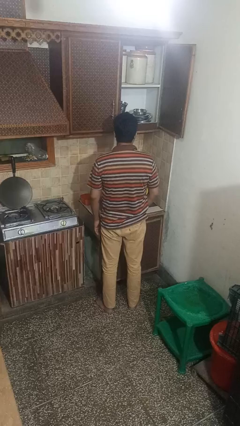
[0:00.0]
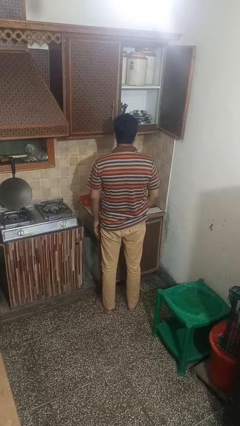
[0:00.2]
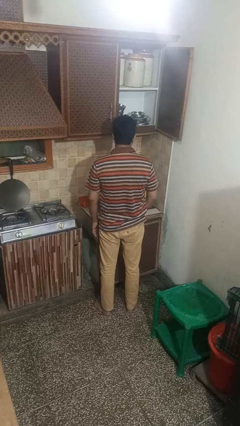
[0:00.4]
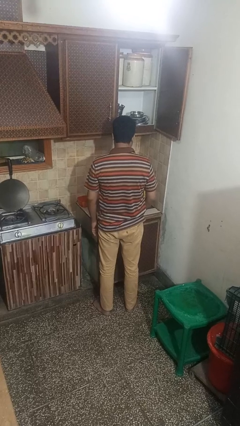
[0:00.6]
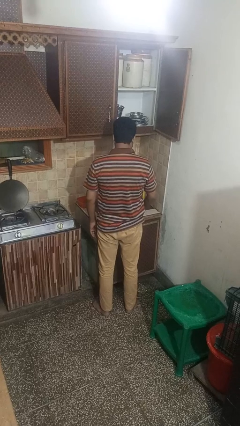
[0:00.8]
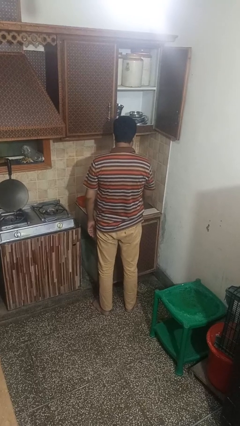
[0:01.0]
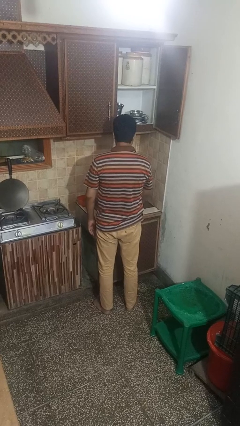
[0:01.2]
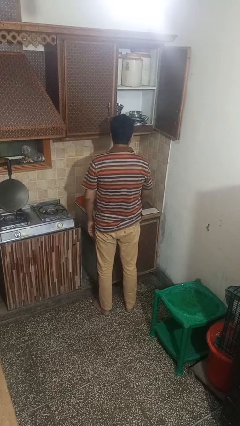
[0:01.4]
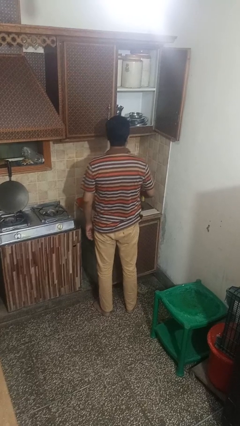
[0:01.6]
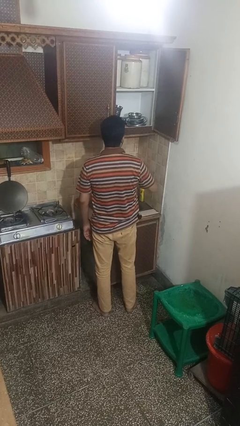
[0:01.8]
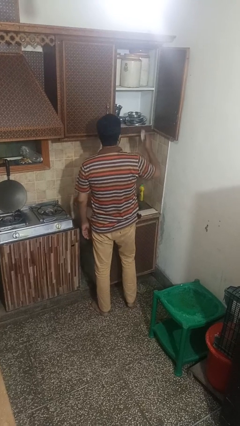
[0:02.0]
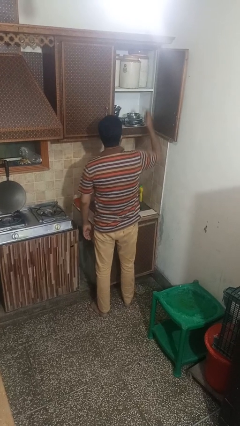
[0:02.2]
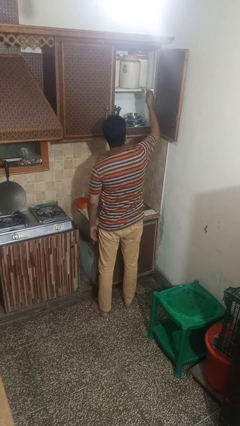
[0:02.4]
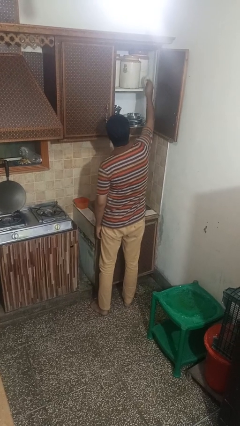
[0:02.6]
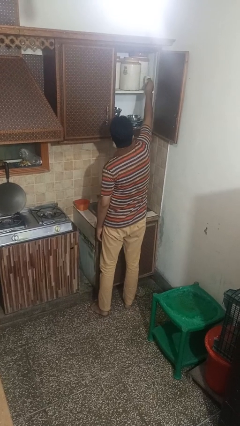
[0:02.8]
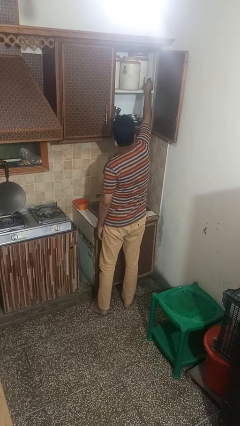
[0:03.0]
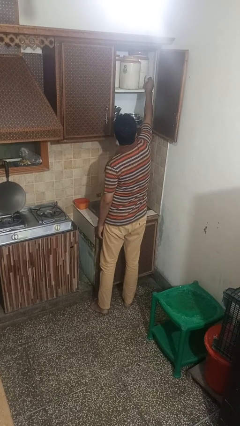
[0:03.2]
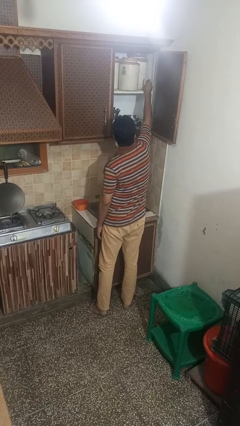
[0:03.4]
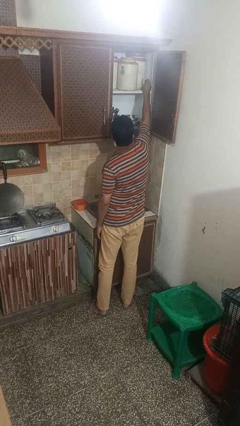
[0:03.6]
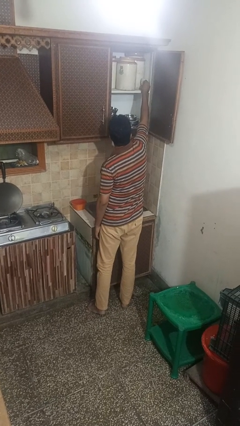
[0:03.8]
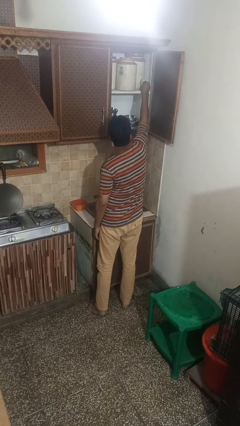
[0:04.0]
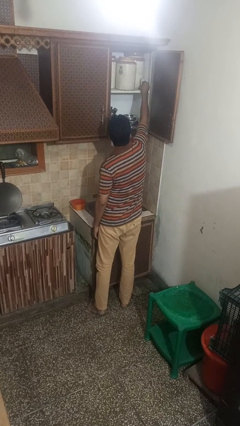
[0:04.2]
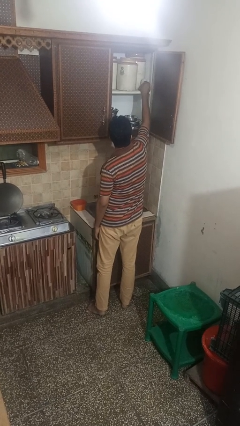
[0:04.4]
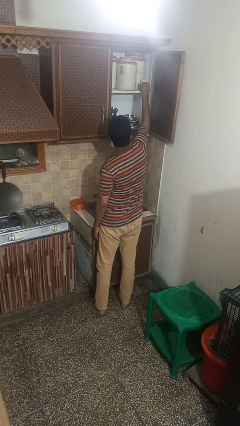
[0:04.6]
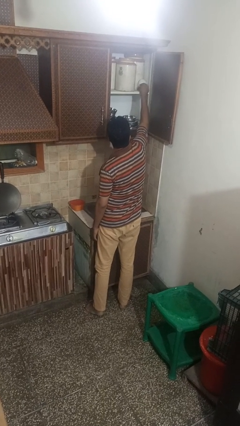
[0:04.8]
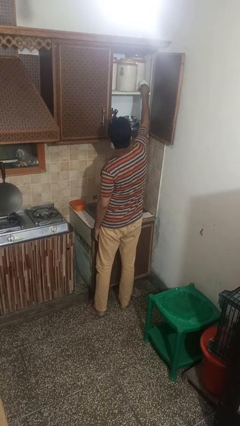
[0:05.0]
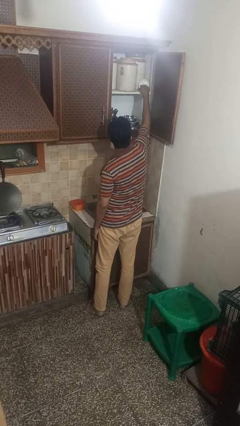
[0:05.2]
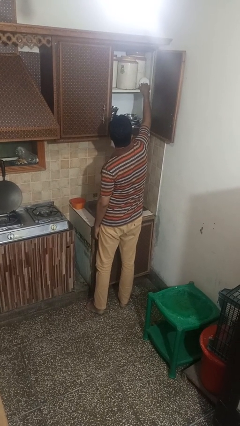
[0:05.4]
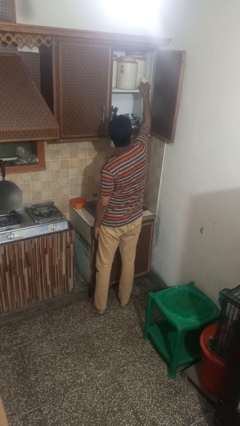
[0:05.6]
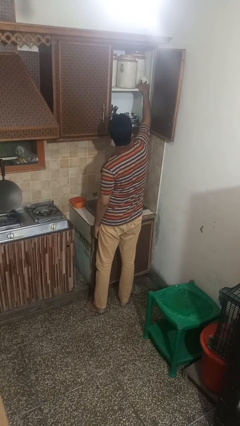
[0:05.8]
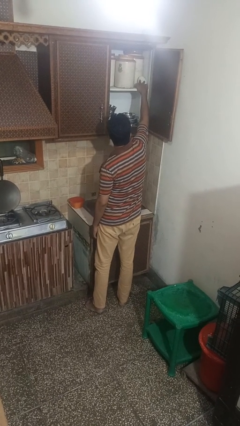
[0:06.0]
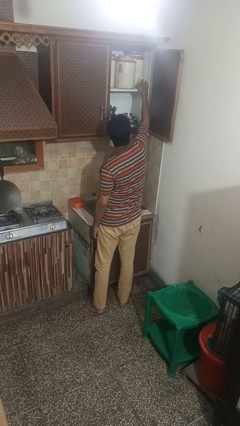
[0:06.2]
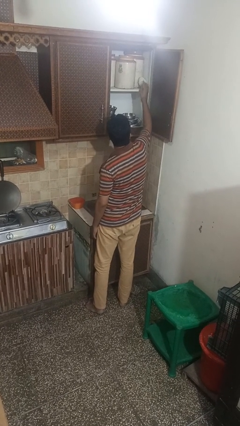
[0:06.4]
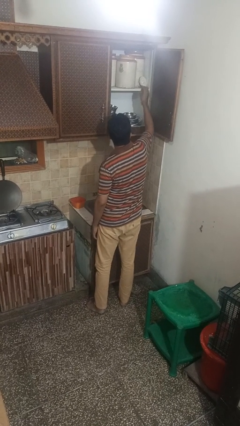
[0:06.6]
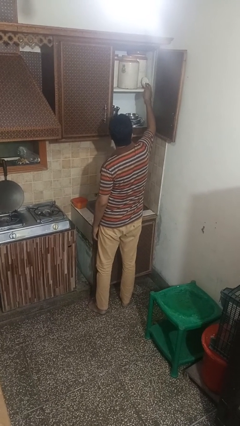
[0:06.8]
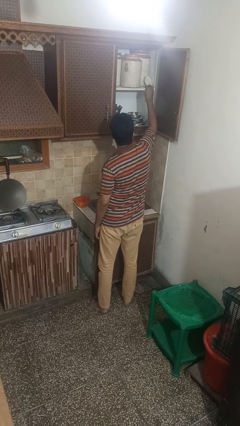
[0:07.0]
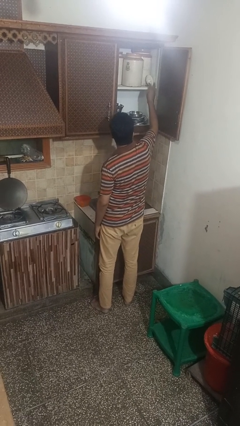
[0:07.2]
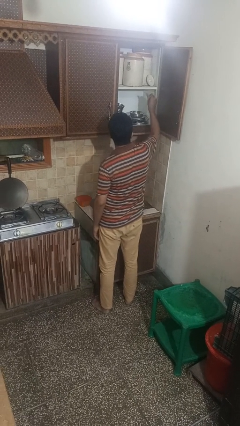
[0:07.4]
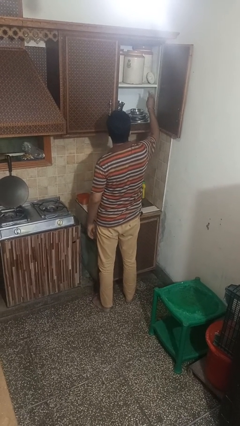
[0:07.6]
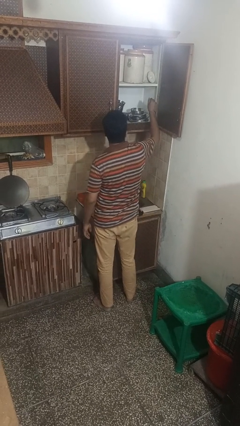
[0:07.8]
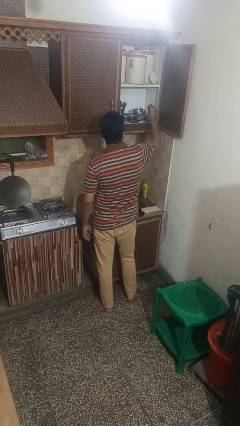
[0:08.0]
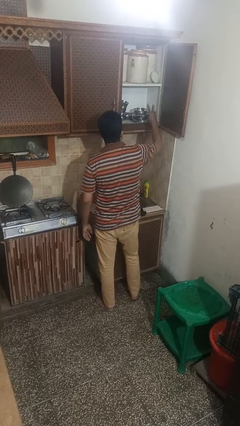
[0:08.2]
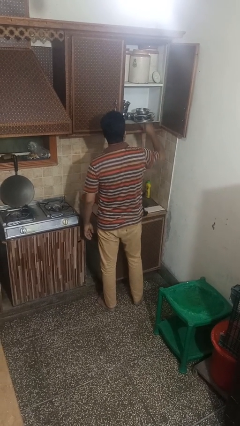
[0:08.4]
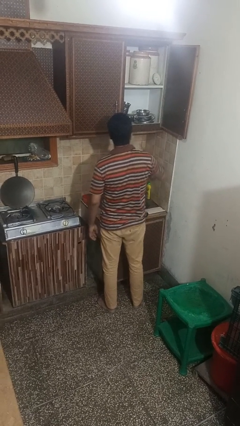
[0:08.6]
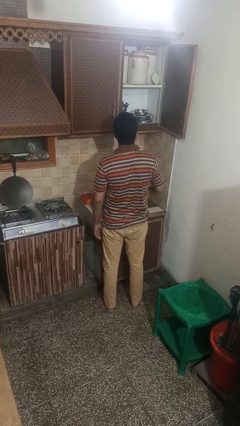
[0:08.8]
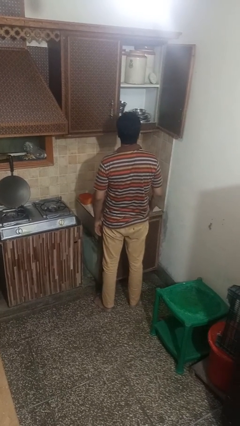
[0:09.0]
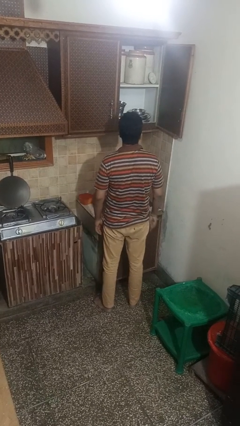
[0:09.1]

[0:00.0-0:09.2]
person puts object in cabinet

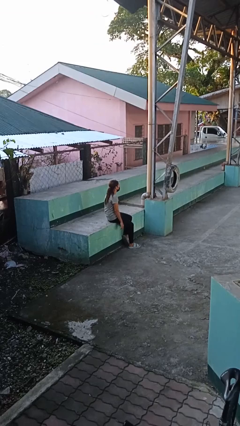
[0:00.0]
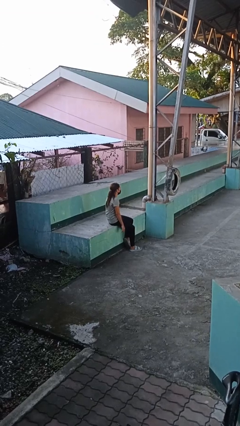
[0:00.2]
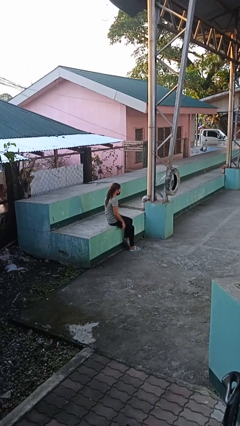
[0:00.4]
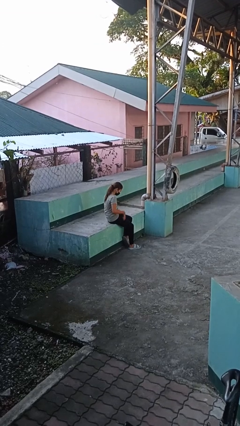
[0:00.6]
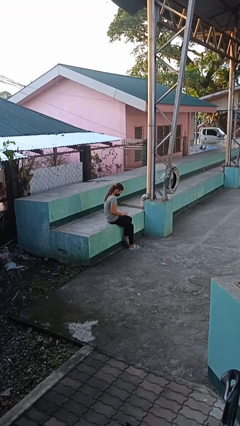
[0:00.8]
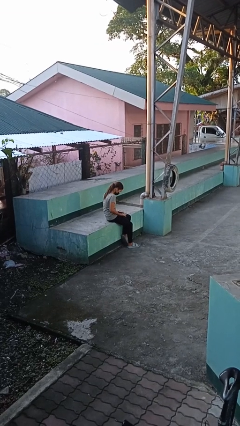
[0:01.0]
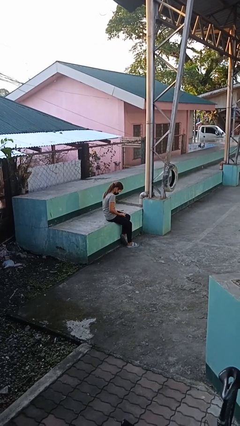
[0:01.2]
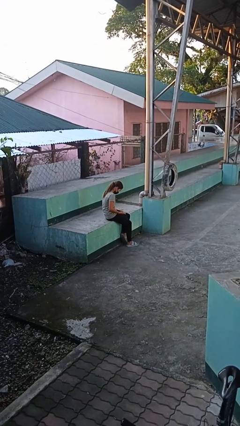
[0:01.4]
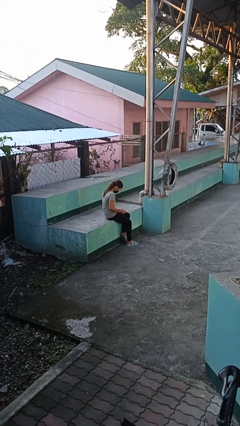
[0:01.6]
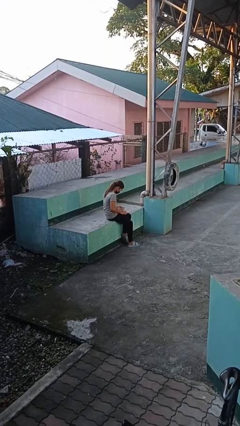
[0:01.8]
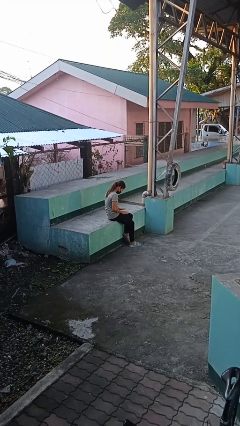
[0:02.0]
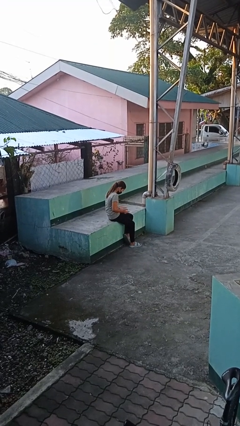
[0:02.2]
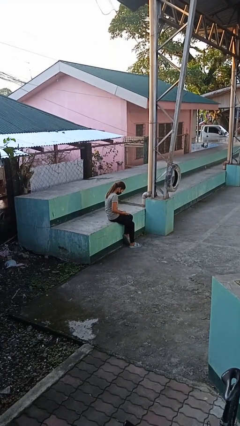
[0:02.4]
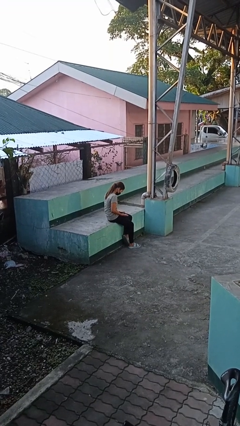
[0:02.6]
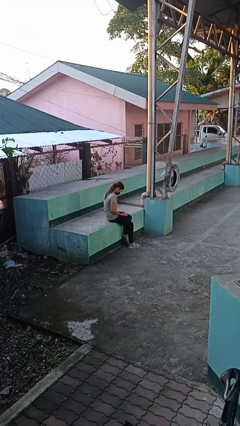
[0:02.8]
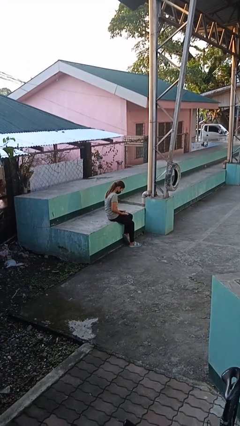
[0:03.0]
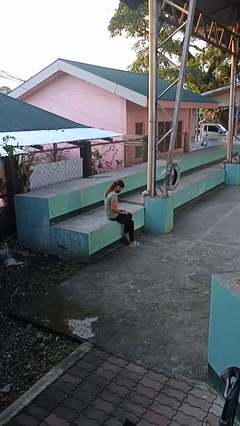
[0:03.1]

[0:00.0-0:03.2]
person looks at hands in lap

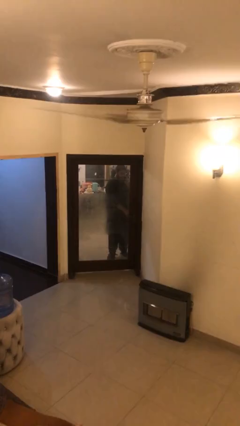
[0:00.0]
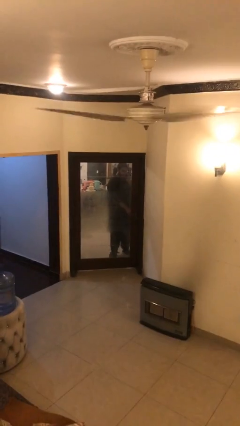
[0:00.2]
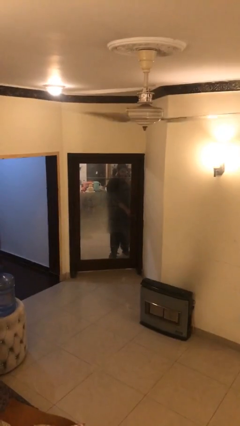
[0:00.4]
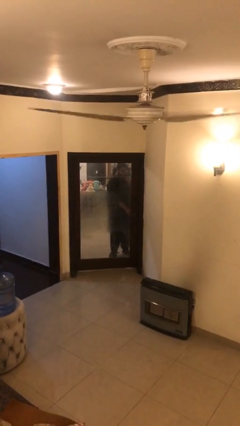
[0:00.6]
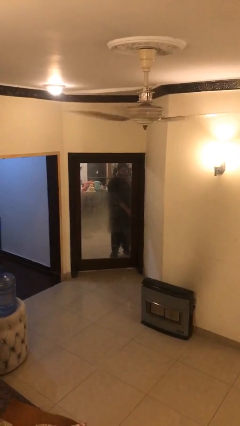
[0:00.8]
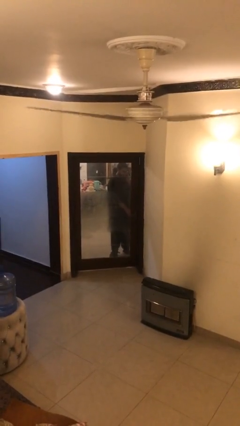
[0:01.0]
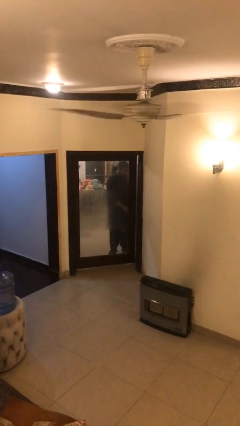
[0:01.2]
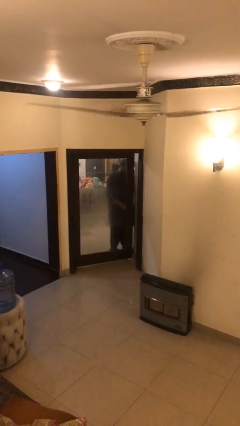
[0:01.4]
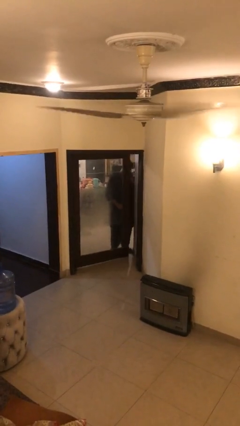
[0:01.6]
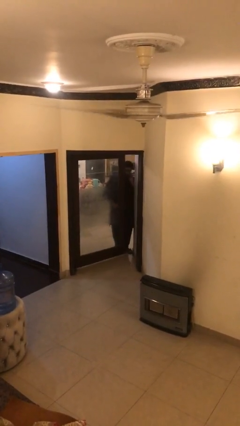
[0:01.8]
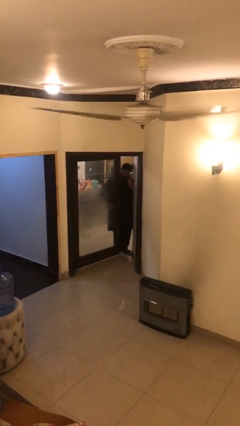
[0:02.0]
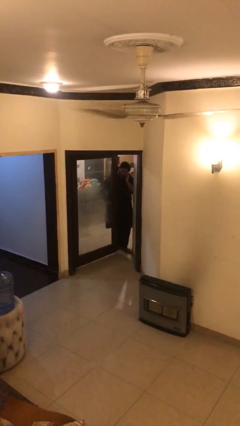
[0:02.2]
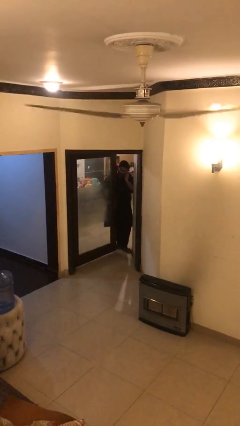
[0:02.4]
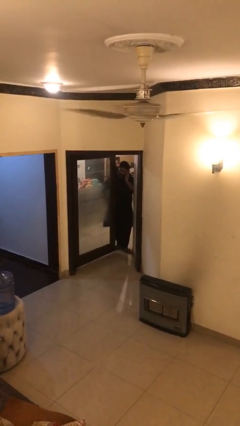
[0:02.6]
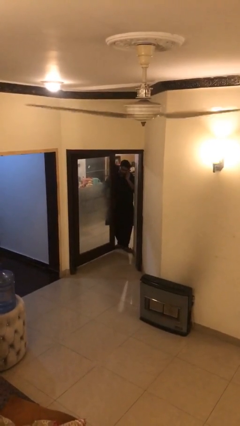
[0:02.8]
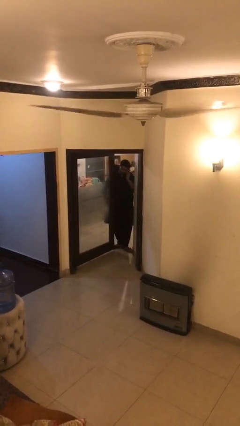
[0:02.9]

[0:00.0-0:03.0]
person opens facility door

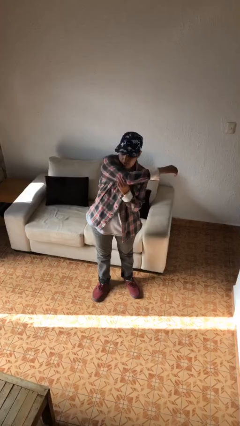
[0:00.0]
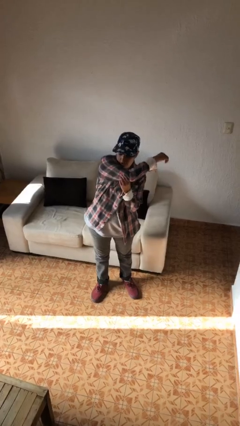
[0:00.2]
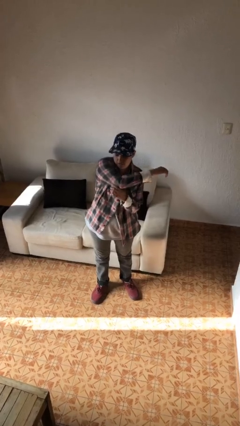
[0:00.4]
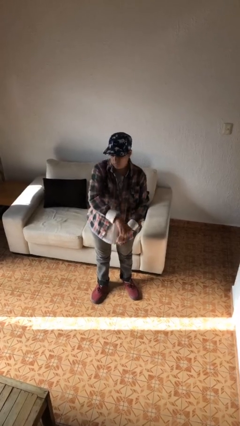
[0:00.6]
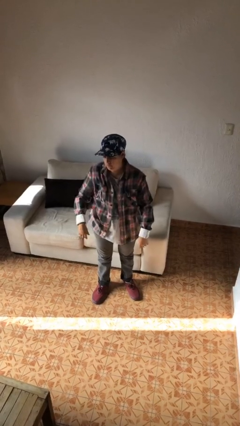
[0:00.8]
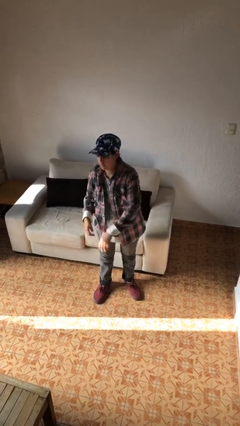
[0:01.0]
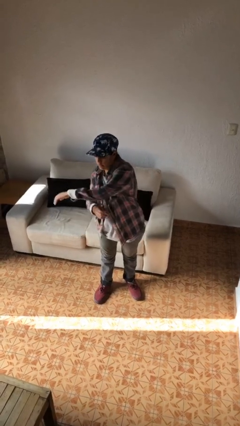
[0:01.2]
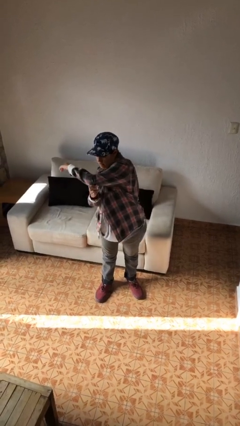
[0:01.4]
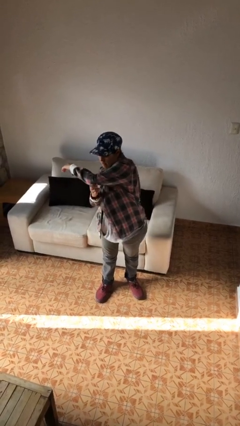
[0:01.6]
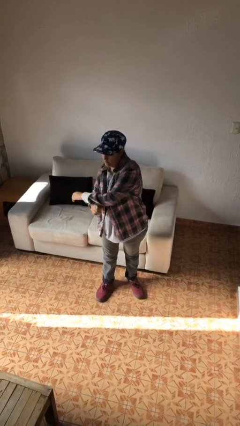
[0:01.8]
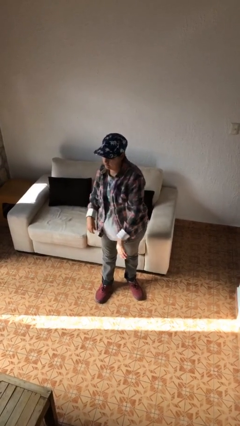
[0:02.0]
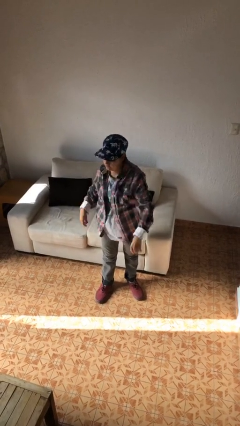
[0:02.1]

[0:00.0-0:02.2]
person stretches arms to side

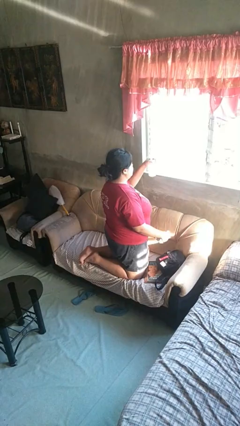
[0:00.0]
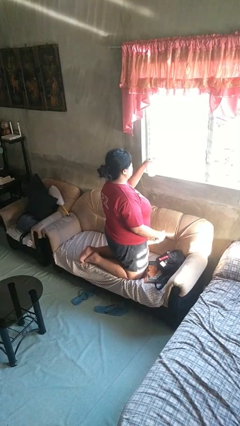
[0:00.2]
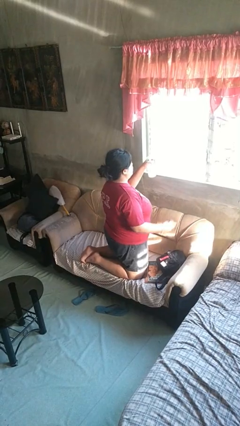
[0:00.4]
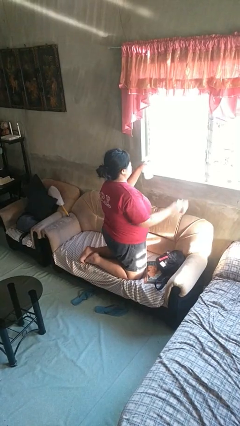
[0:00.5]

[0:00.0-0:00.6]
person sprays from bottle
